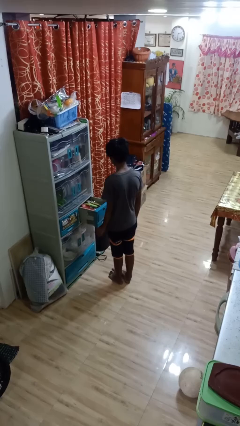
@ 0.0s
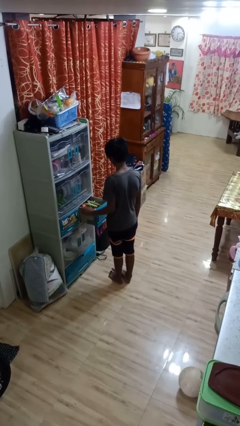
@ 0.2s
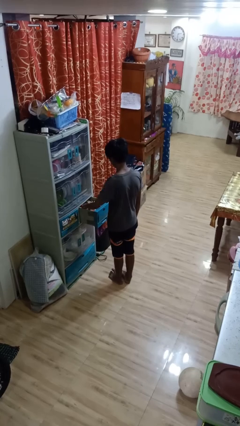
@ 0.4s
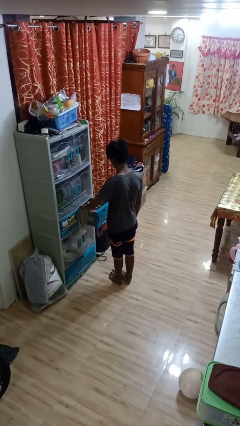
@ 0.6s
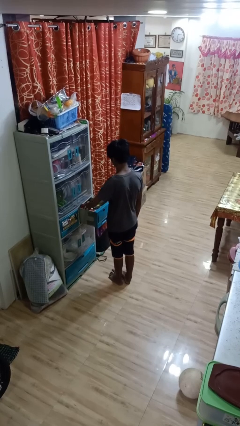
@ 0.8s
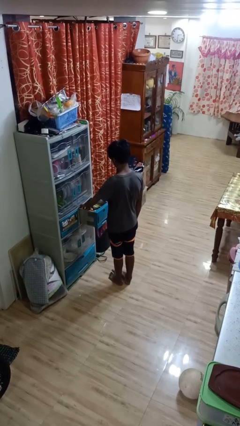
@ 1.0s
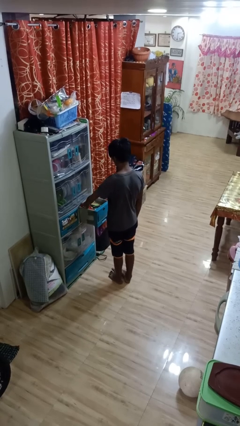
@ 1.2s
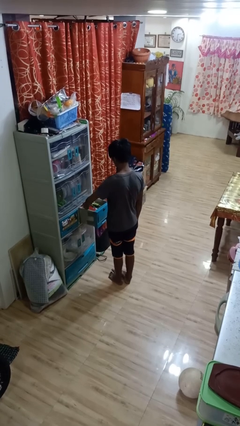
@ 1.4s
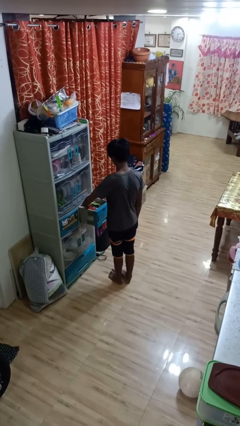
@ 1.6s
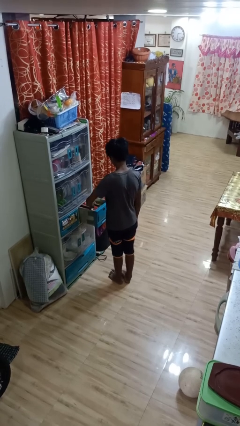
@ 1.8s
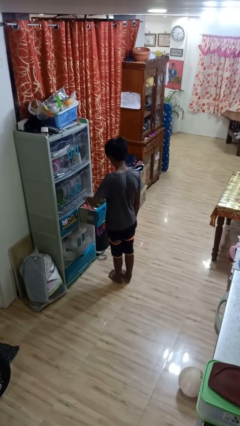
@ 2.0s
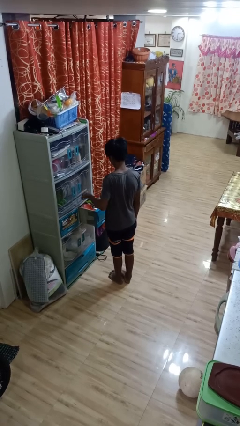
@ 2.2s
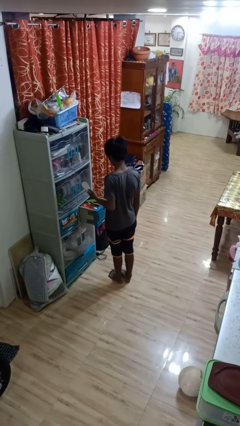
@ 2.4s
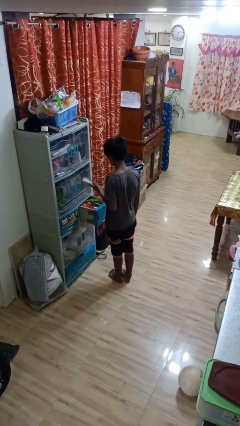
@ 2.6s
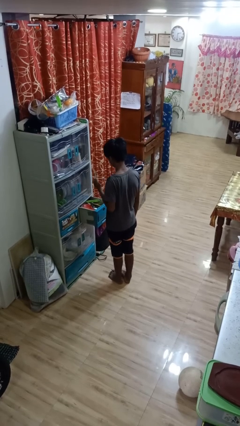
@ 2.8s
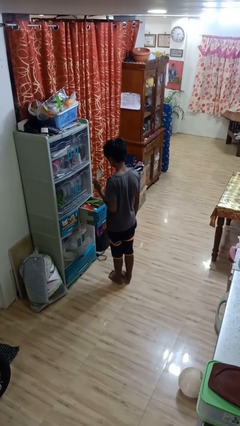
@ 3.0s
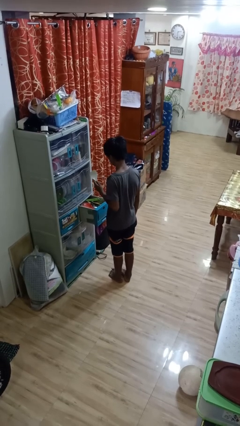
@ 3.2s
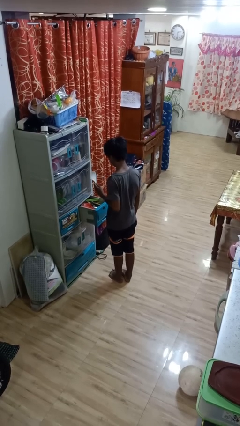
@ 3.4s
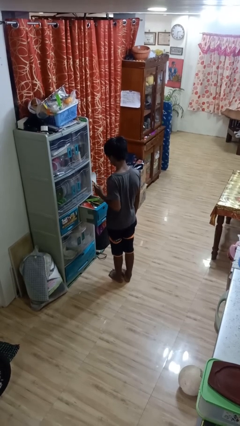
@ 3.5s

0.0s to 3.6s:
person takes object from kitchen drawer

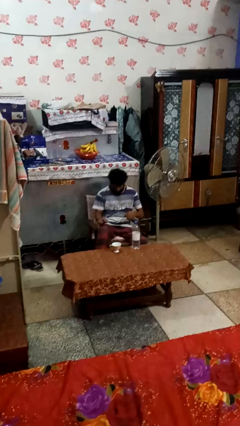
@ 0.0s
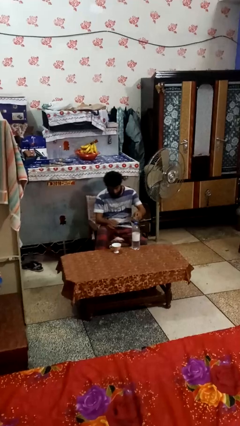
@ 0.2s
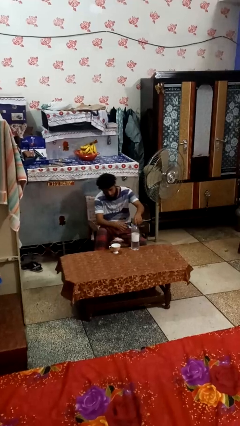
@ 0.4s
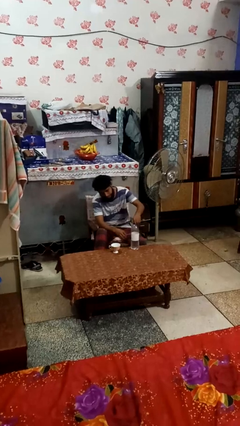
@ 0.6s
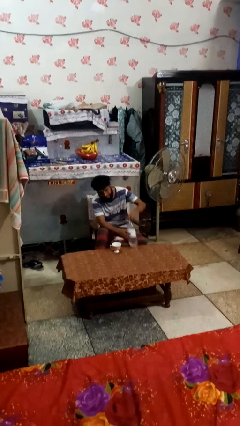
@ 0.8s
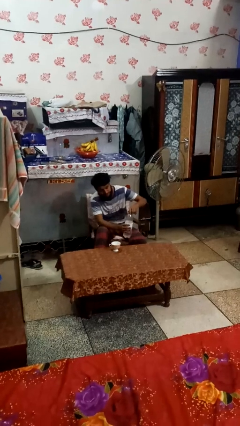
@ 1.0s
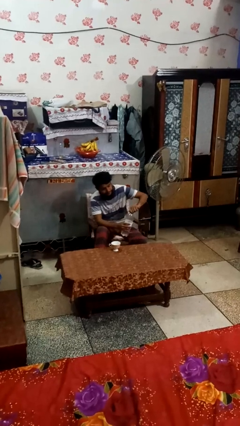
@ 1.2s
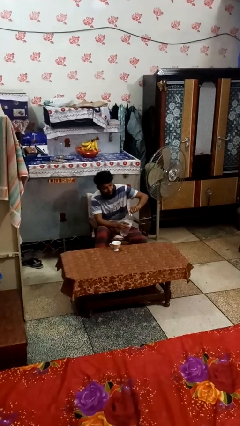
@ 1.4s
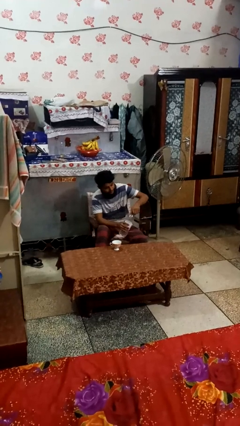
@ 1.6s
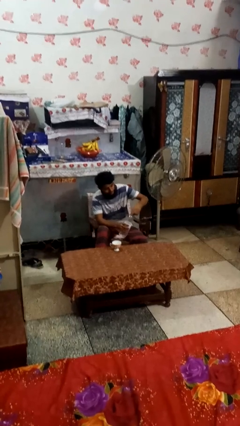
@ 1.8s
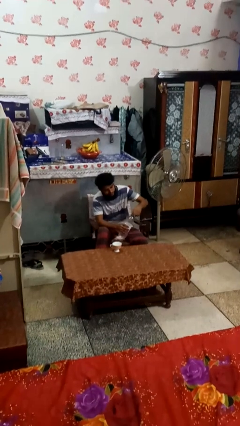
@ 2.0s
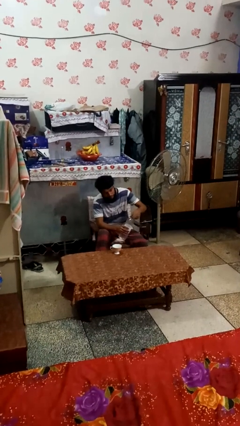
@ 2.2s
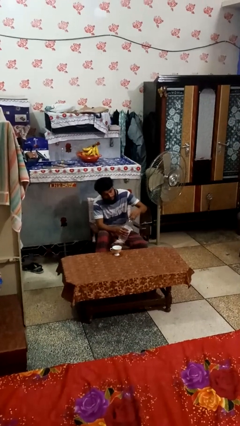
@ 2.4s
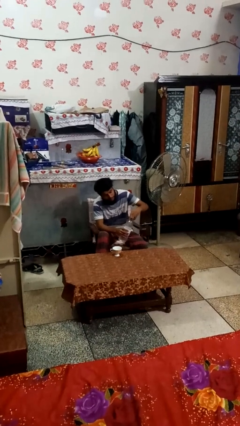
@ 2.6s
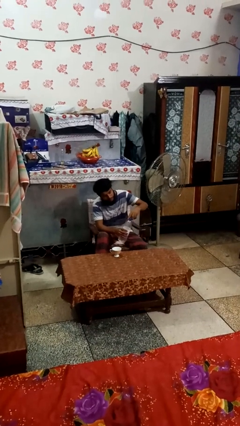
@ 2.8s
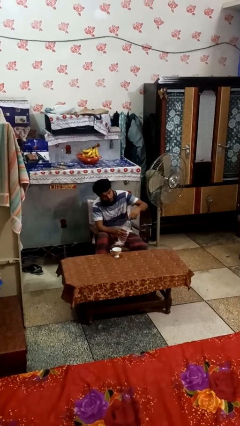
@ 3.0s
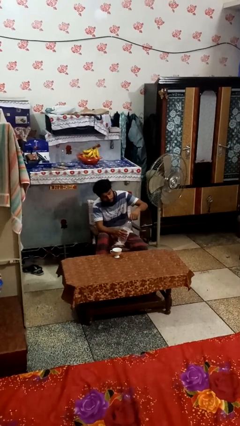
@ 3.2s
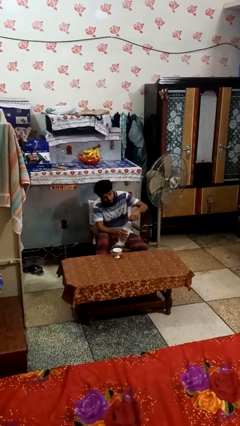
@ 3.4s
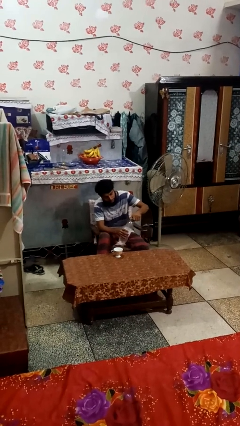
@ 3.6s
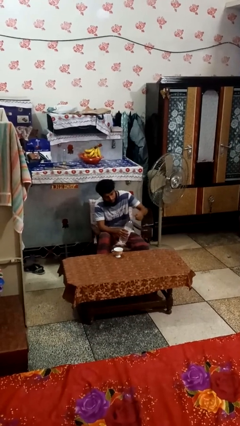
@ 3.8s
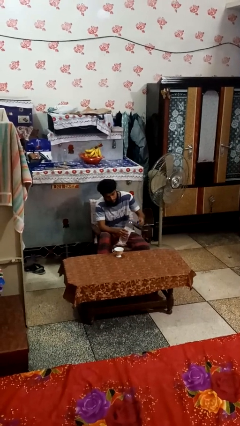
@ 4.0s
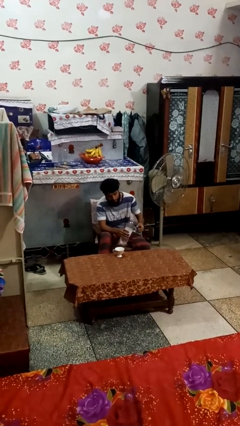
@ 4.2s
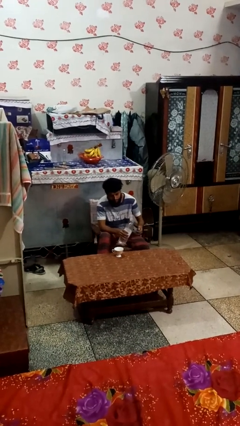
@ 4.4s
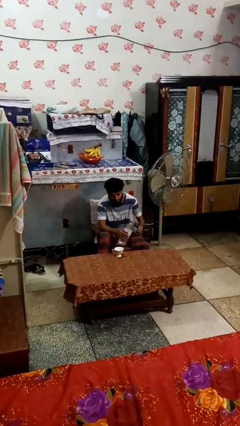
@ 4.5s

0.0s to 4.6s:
person unscrews lid from bottle

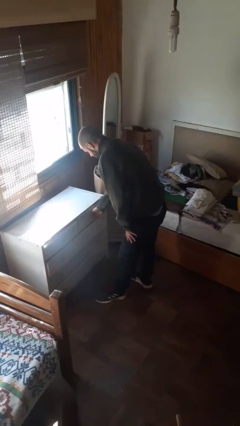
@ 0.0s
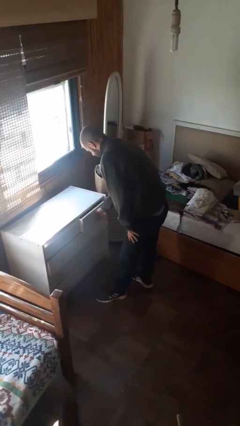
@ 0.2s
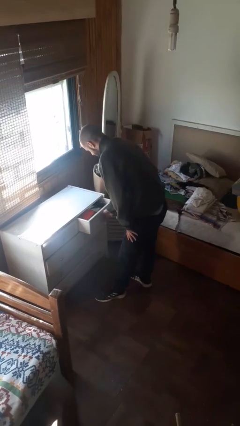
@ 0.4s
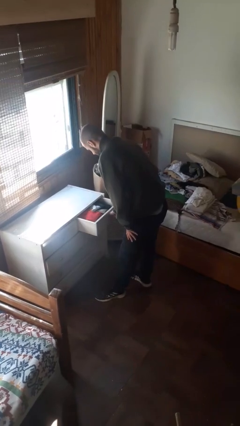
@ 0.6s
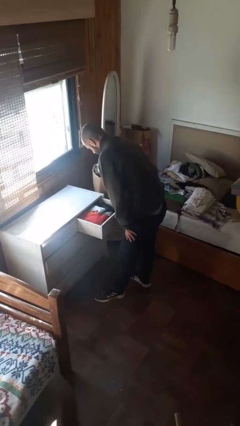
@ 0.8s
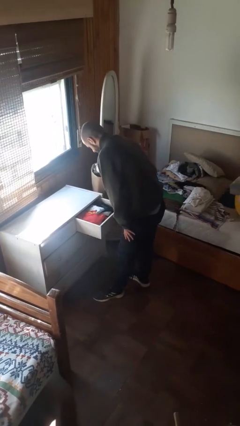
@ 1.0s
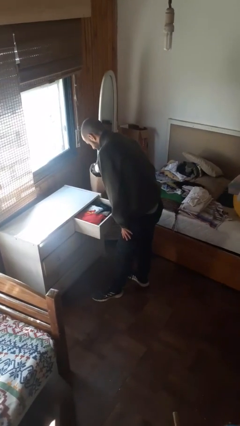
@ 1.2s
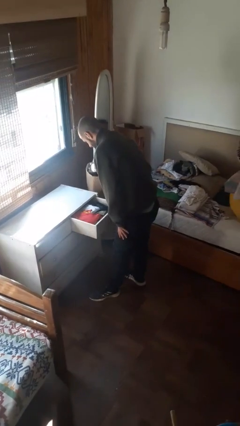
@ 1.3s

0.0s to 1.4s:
person opens dresser drawer

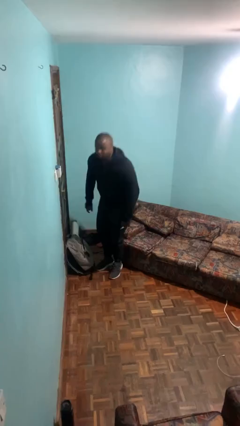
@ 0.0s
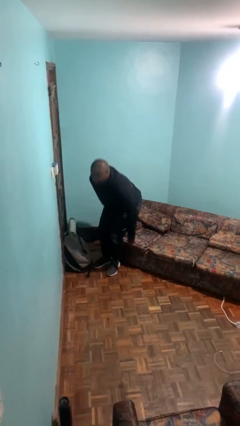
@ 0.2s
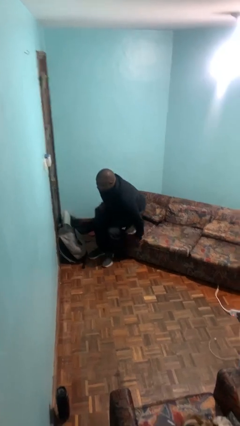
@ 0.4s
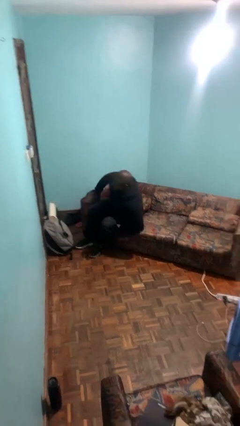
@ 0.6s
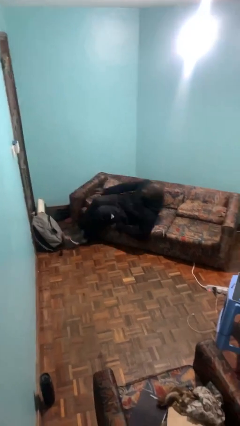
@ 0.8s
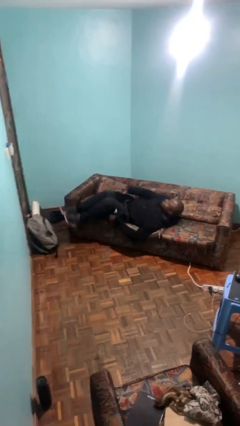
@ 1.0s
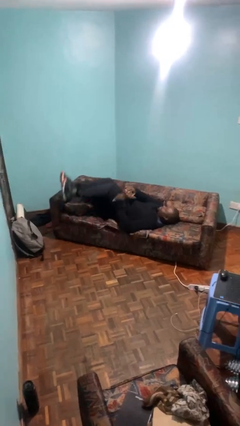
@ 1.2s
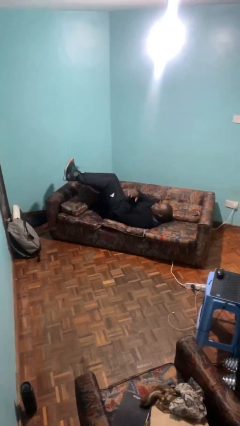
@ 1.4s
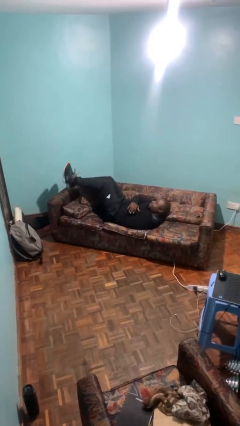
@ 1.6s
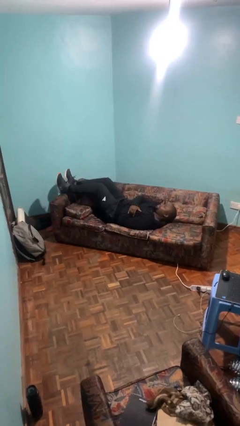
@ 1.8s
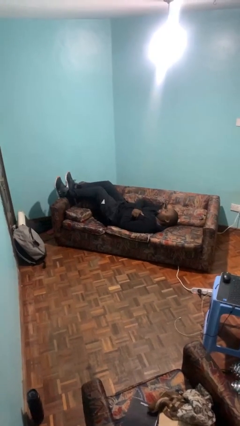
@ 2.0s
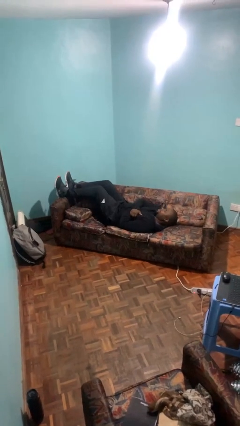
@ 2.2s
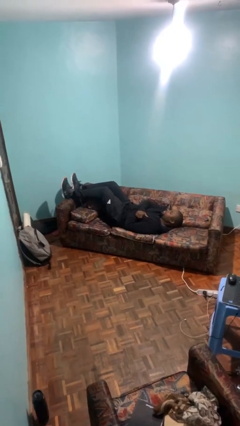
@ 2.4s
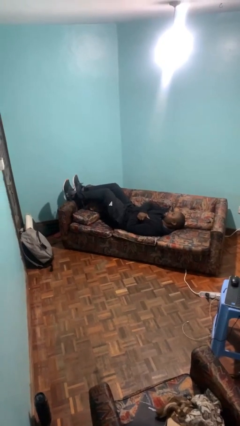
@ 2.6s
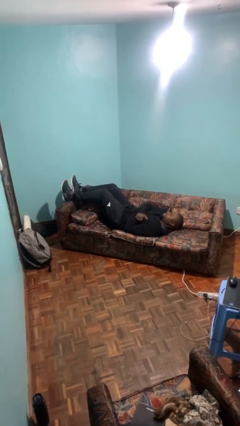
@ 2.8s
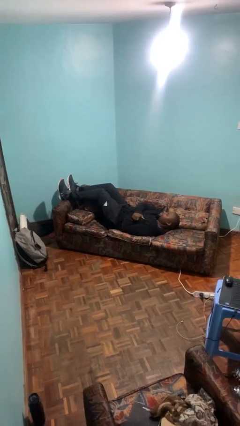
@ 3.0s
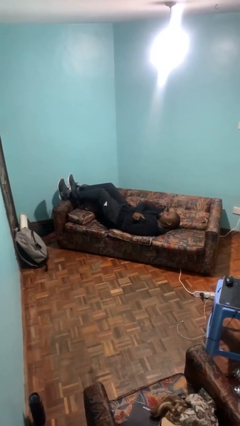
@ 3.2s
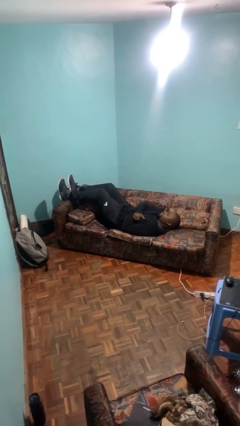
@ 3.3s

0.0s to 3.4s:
person lies down on bed

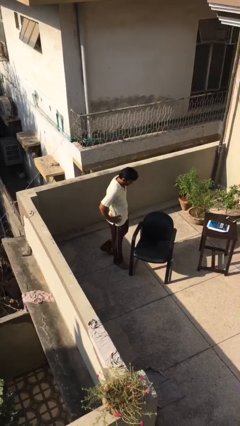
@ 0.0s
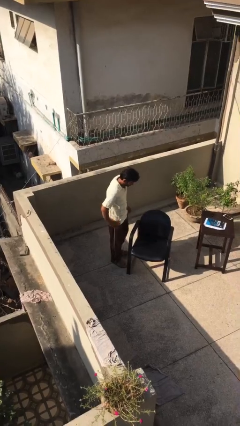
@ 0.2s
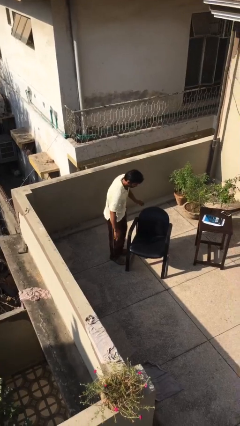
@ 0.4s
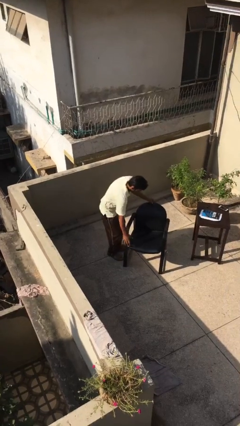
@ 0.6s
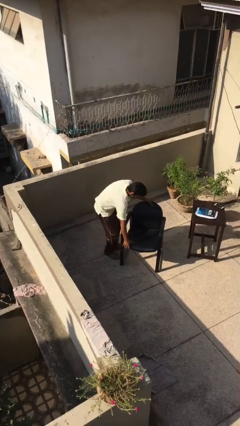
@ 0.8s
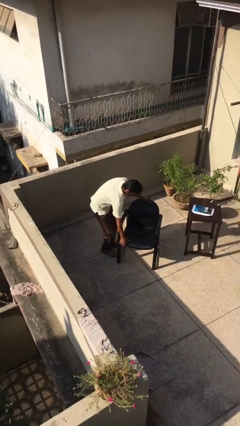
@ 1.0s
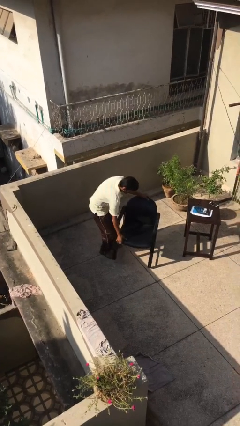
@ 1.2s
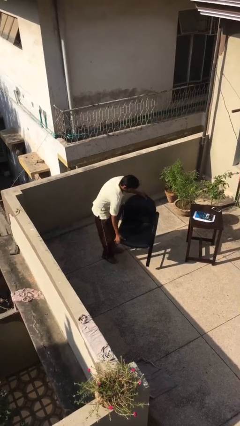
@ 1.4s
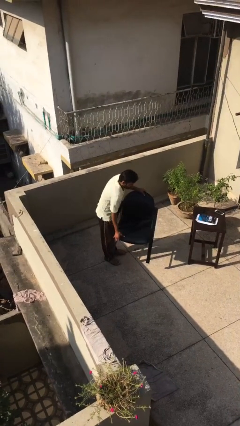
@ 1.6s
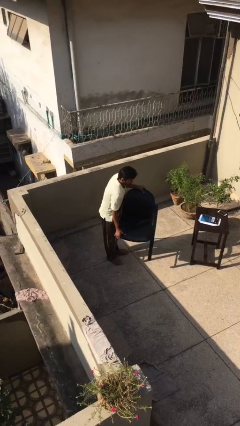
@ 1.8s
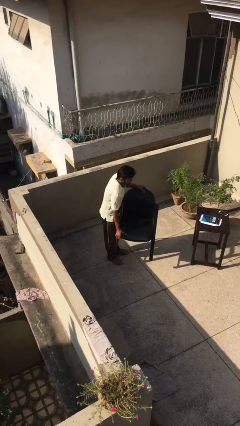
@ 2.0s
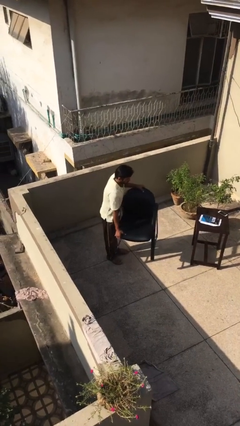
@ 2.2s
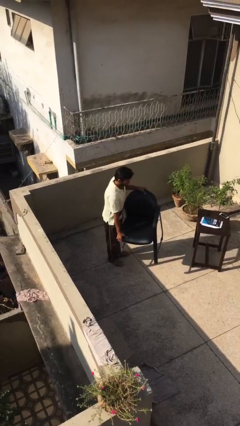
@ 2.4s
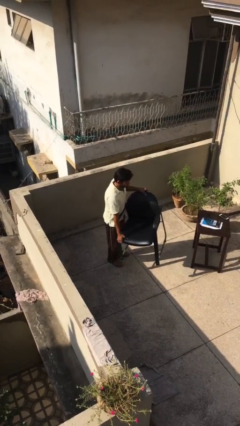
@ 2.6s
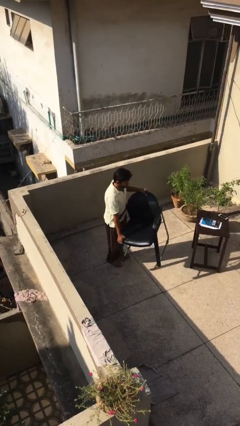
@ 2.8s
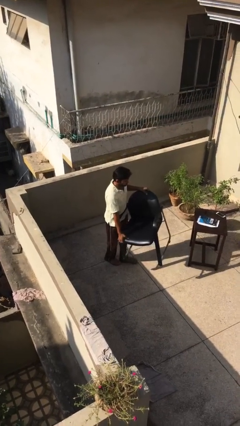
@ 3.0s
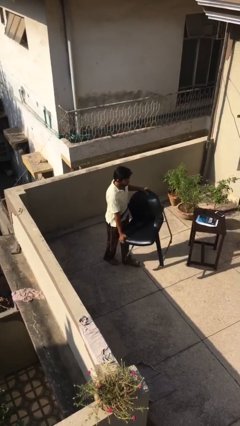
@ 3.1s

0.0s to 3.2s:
person picks up object from floor

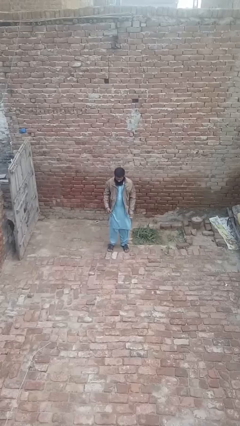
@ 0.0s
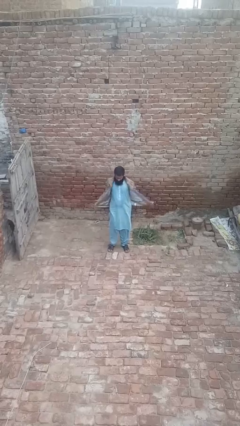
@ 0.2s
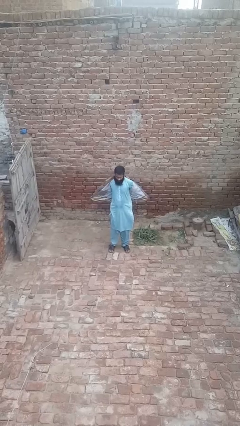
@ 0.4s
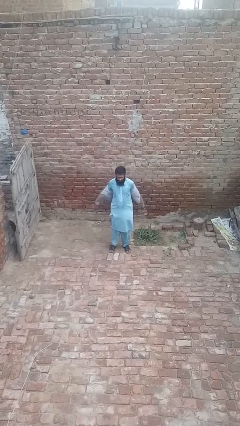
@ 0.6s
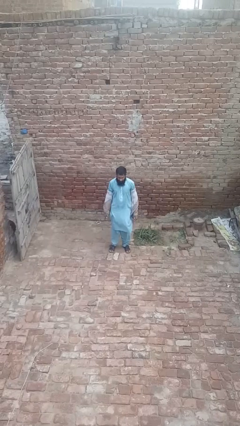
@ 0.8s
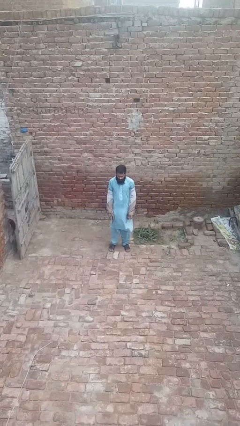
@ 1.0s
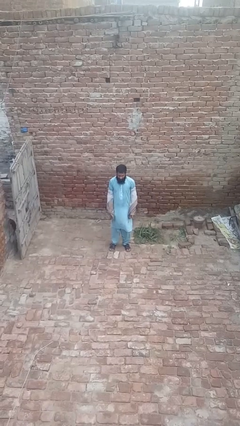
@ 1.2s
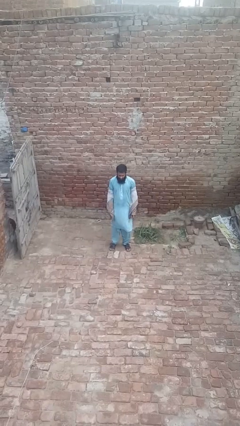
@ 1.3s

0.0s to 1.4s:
person takes off jacket

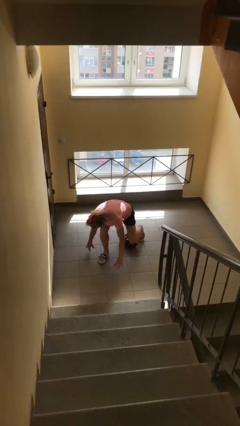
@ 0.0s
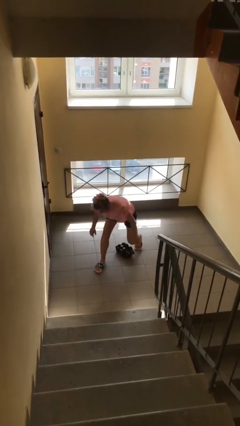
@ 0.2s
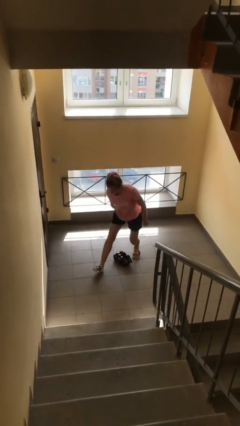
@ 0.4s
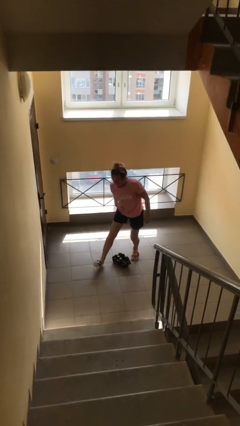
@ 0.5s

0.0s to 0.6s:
person stands up from floor
